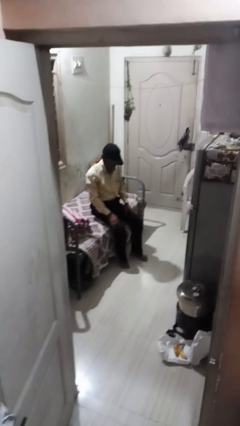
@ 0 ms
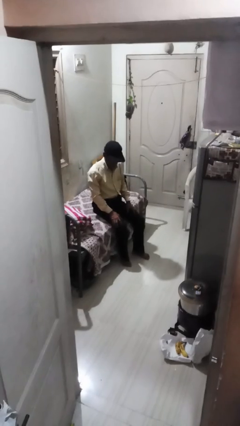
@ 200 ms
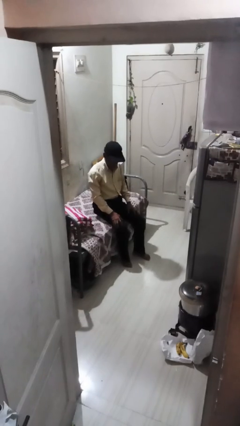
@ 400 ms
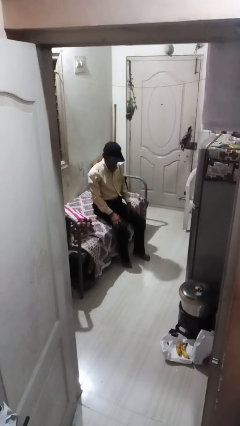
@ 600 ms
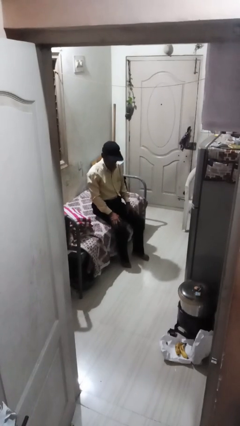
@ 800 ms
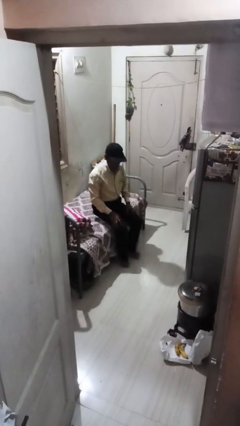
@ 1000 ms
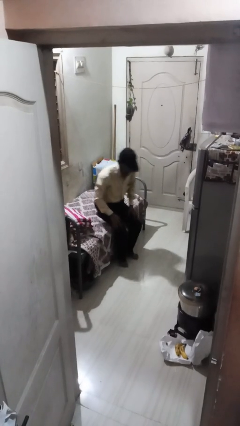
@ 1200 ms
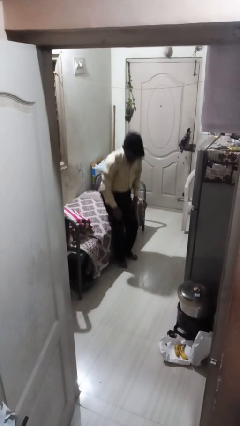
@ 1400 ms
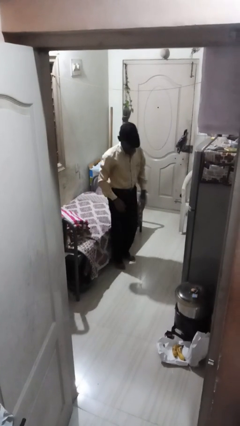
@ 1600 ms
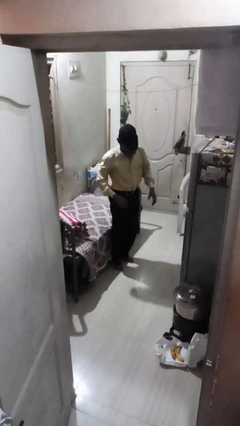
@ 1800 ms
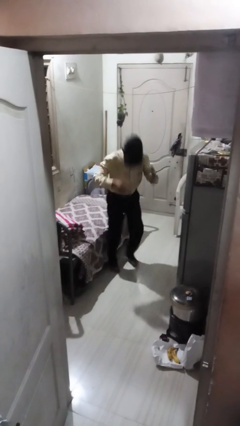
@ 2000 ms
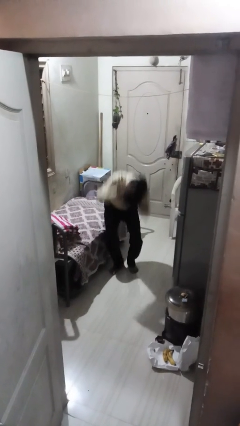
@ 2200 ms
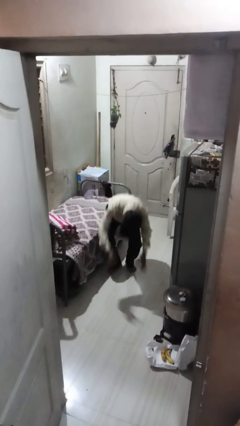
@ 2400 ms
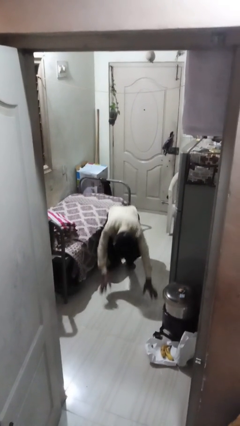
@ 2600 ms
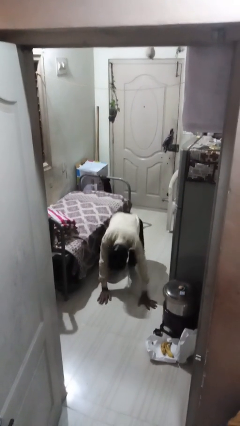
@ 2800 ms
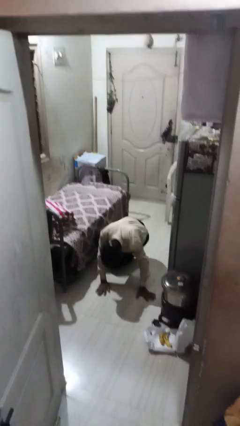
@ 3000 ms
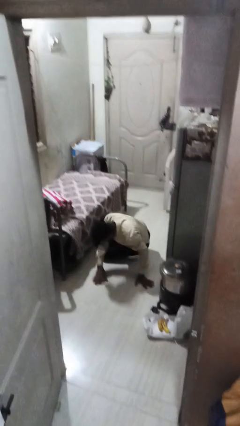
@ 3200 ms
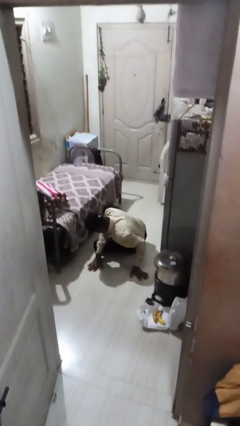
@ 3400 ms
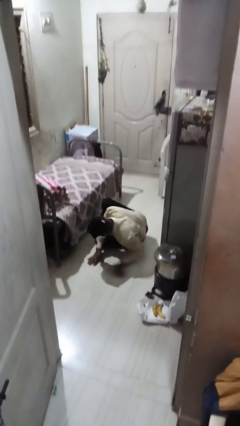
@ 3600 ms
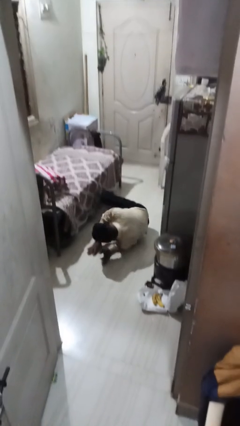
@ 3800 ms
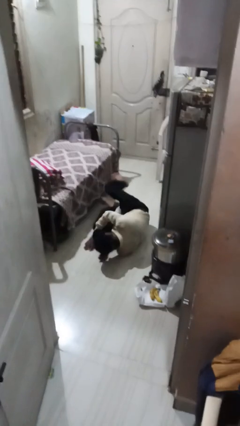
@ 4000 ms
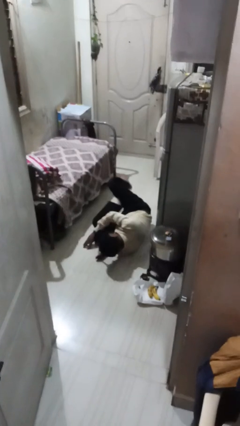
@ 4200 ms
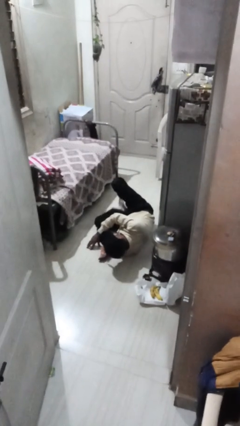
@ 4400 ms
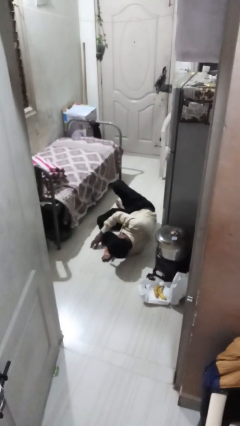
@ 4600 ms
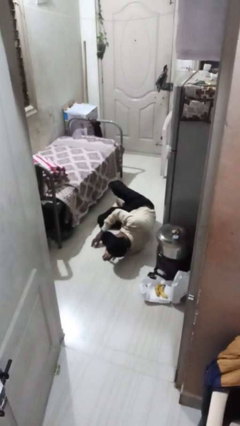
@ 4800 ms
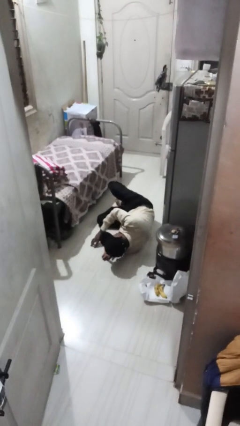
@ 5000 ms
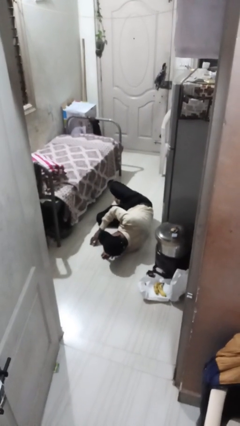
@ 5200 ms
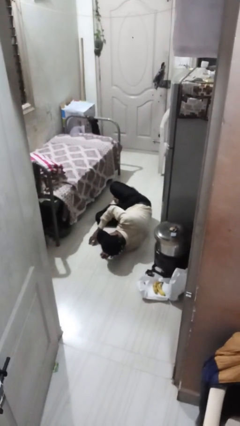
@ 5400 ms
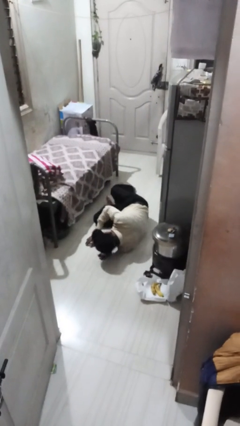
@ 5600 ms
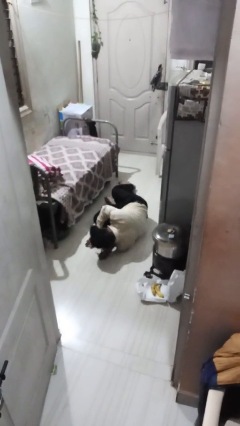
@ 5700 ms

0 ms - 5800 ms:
person falls while standing

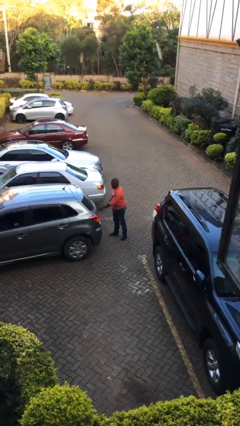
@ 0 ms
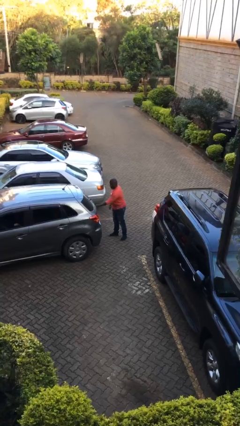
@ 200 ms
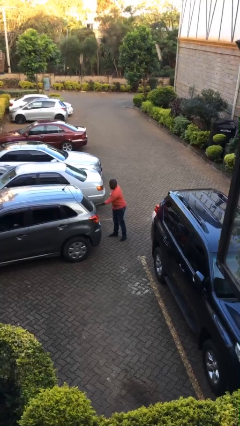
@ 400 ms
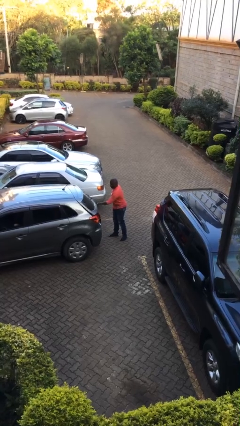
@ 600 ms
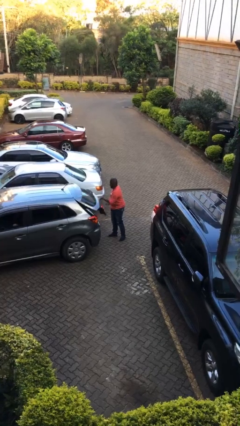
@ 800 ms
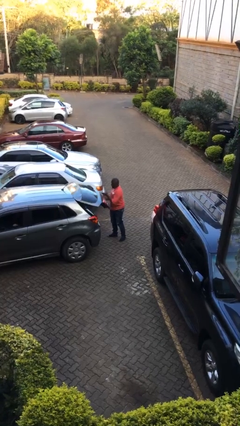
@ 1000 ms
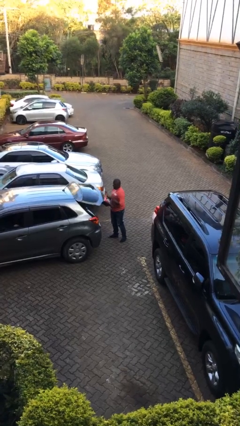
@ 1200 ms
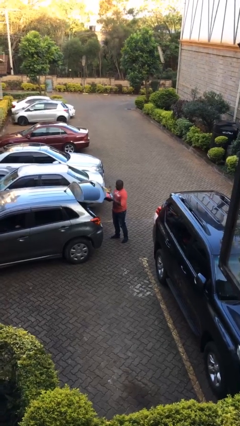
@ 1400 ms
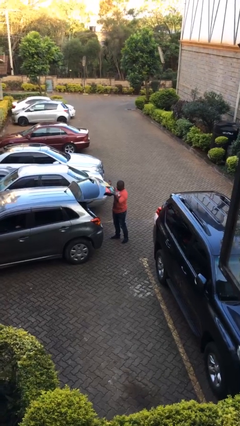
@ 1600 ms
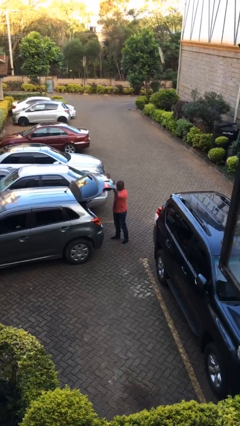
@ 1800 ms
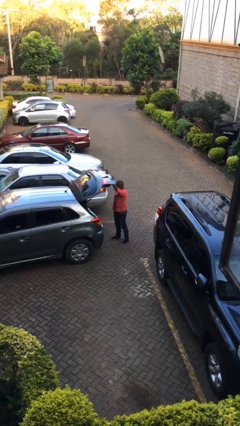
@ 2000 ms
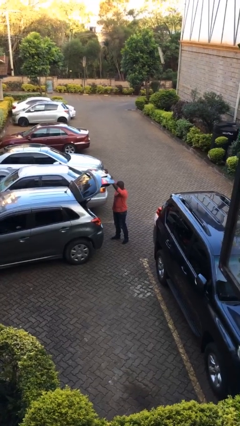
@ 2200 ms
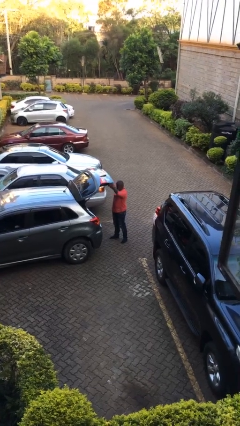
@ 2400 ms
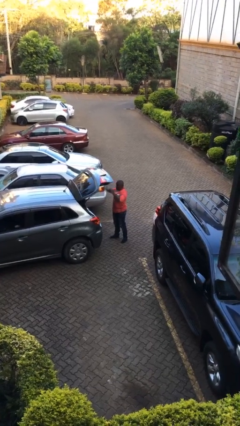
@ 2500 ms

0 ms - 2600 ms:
person opens car trunk

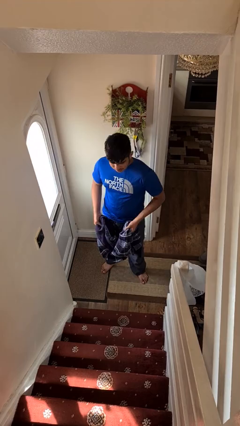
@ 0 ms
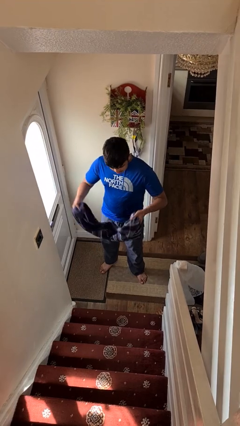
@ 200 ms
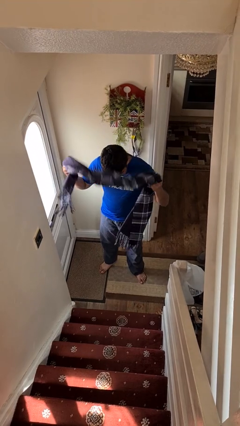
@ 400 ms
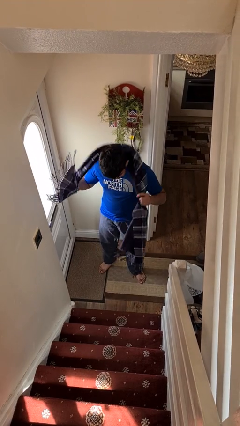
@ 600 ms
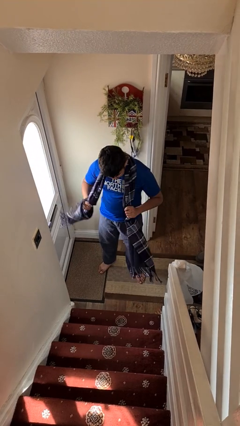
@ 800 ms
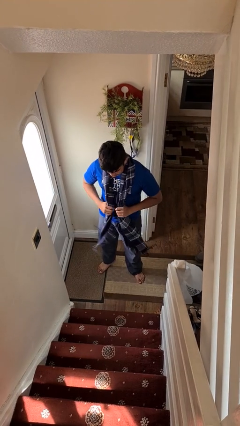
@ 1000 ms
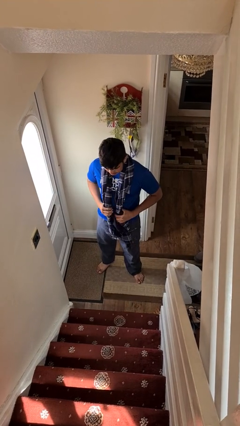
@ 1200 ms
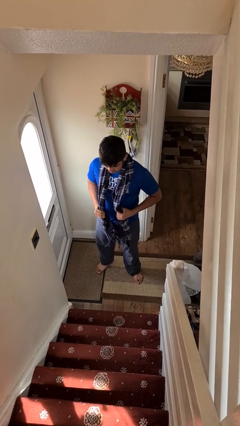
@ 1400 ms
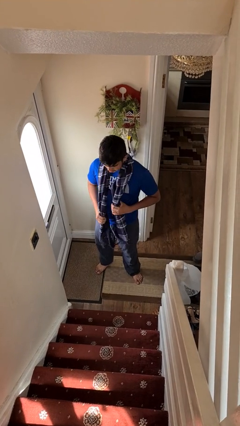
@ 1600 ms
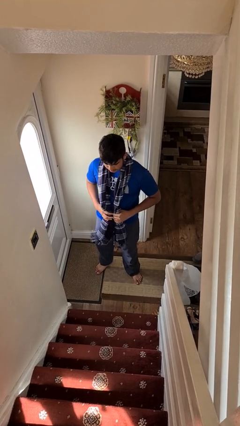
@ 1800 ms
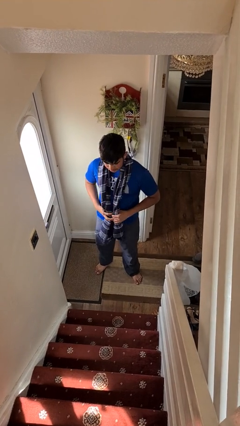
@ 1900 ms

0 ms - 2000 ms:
person puts on scarf

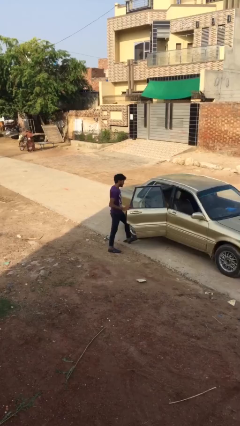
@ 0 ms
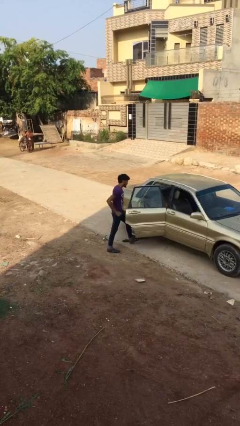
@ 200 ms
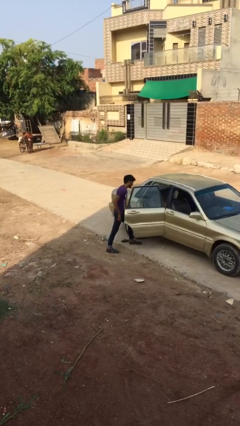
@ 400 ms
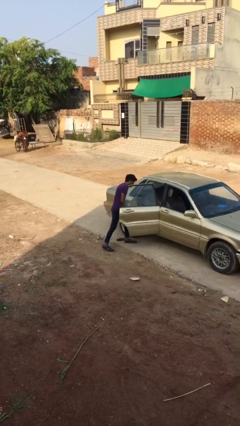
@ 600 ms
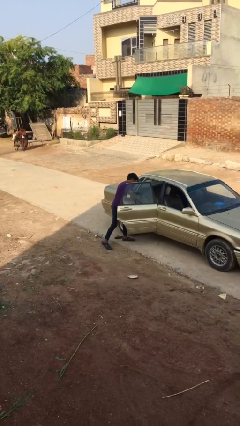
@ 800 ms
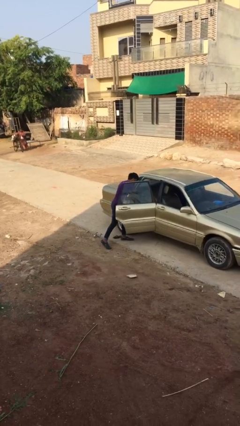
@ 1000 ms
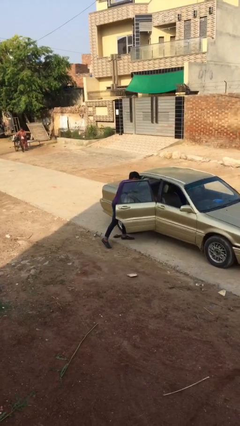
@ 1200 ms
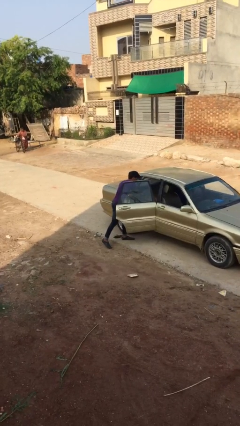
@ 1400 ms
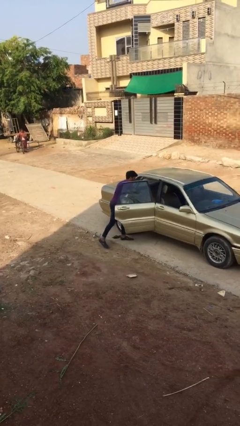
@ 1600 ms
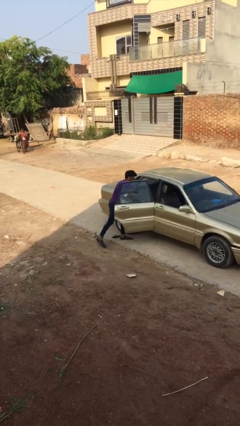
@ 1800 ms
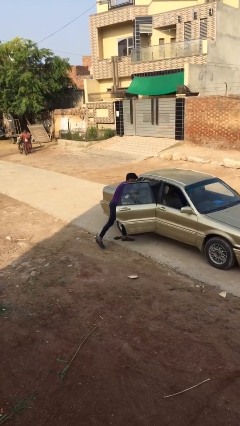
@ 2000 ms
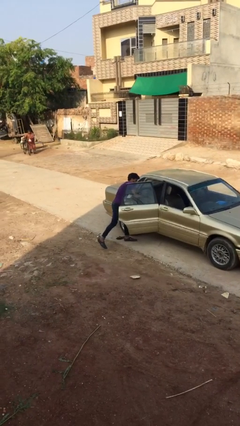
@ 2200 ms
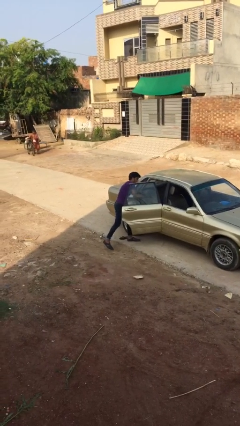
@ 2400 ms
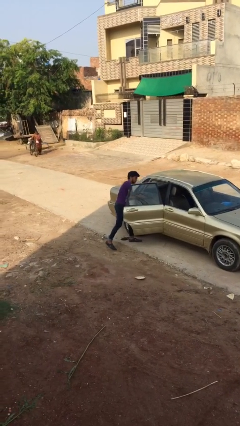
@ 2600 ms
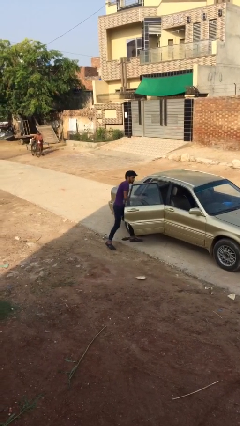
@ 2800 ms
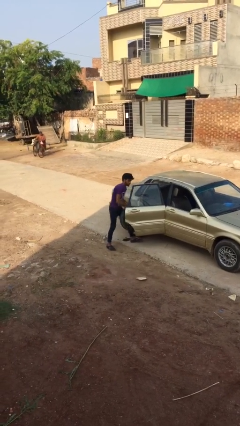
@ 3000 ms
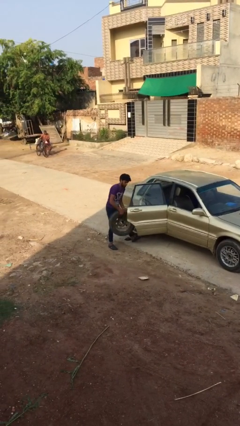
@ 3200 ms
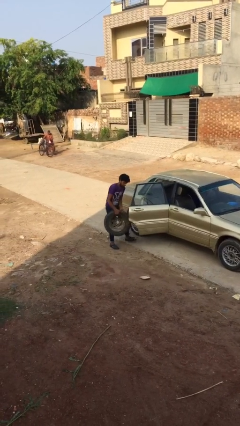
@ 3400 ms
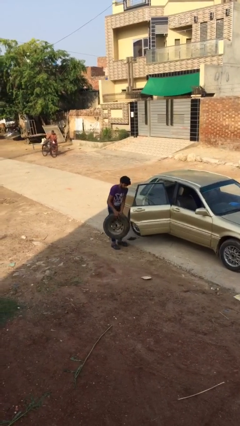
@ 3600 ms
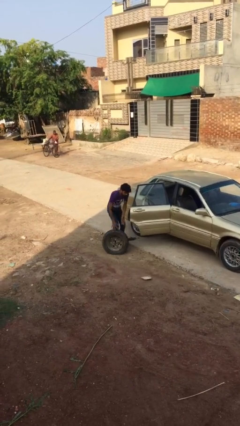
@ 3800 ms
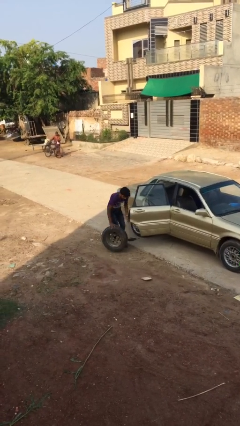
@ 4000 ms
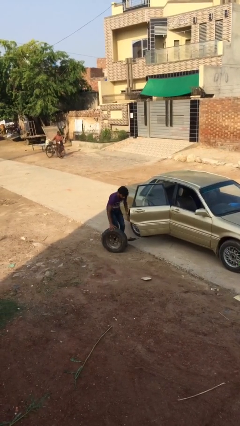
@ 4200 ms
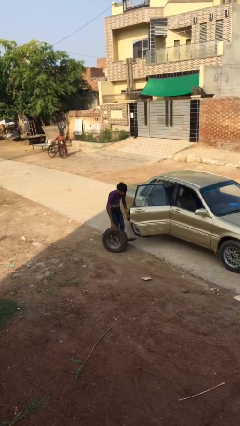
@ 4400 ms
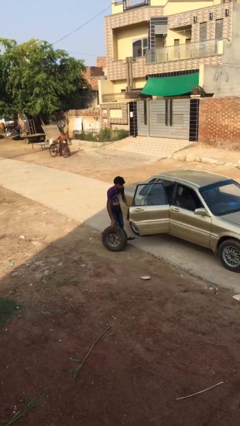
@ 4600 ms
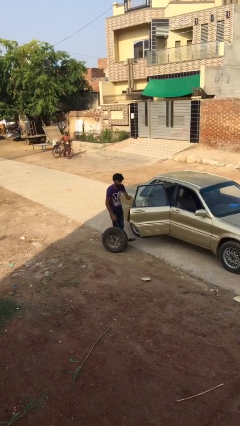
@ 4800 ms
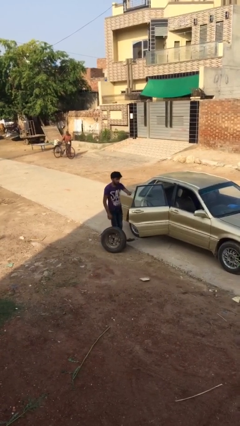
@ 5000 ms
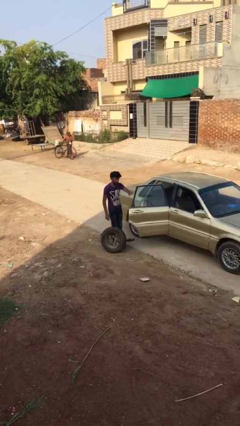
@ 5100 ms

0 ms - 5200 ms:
person unloads car

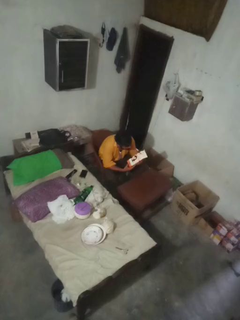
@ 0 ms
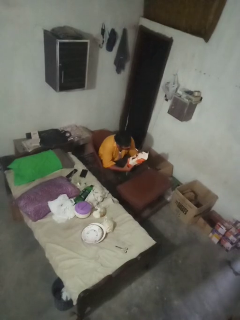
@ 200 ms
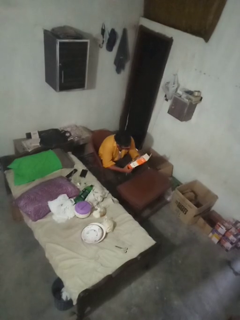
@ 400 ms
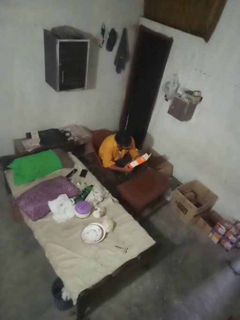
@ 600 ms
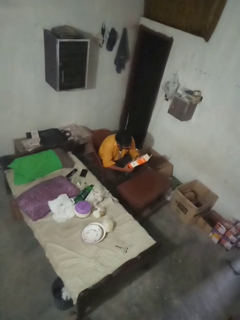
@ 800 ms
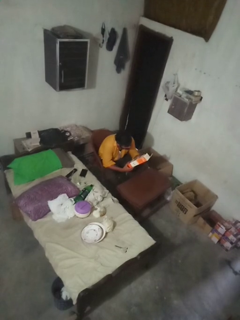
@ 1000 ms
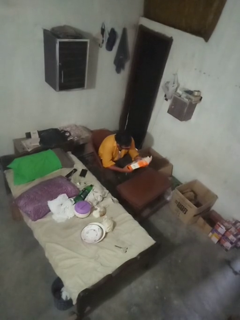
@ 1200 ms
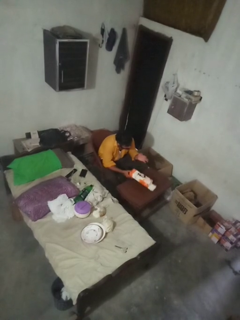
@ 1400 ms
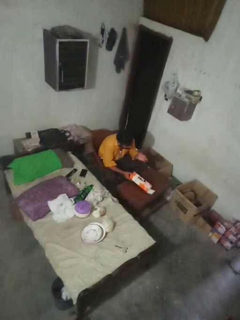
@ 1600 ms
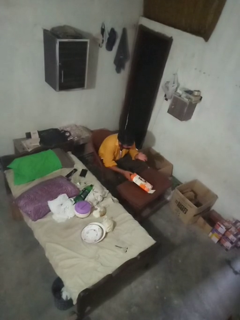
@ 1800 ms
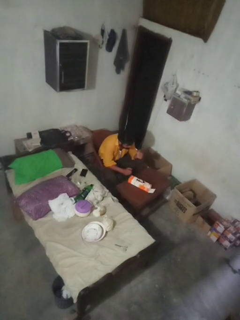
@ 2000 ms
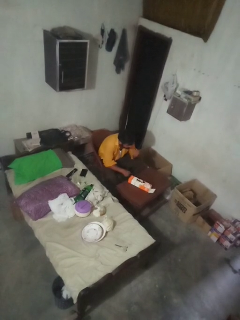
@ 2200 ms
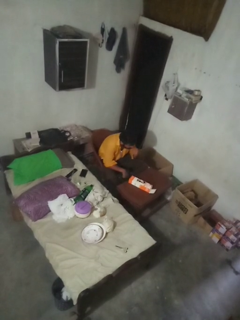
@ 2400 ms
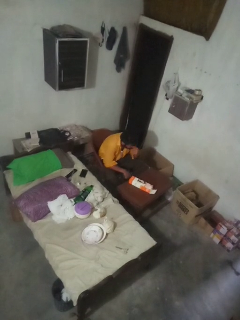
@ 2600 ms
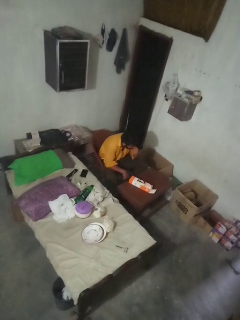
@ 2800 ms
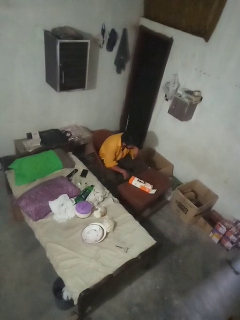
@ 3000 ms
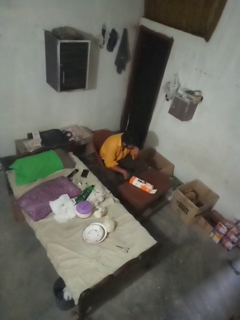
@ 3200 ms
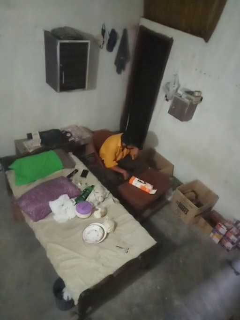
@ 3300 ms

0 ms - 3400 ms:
person puts down object on countertop
